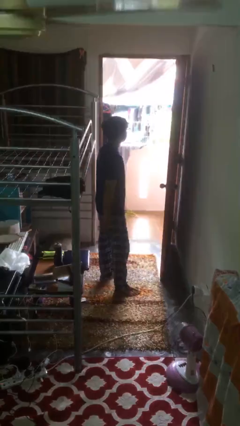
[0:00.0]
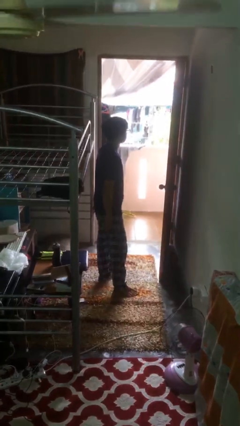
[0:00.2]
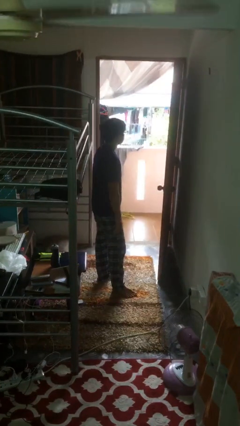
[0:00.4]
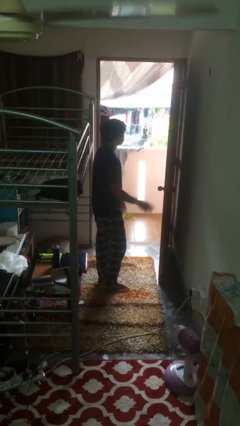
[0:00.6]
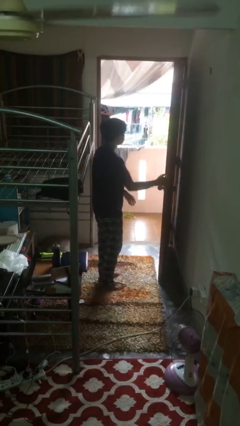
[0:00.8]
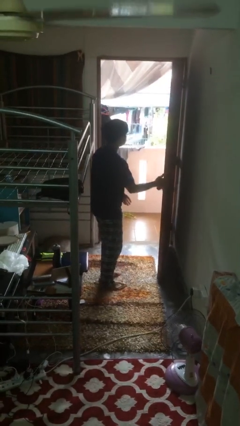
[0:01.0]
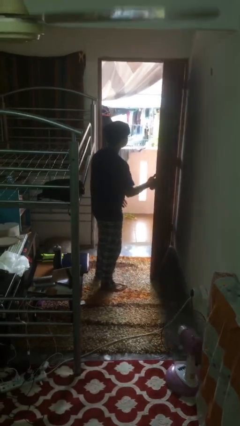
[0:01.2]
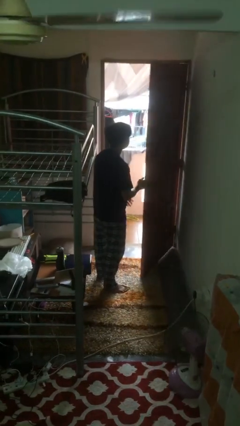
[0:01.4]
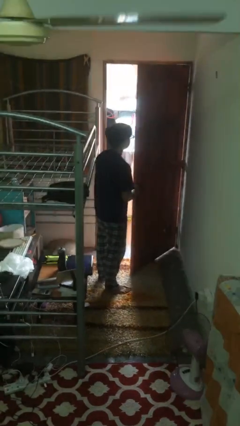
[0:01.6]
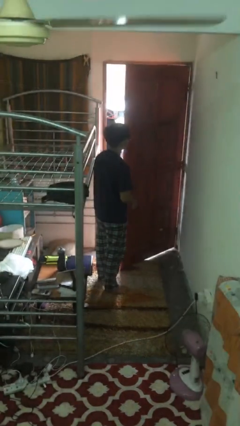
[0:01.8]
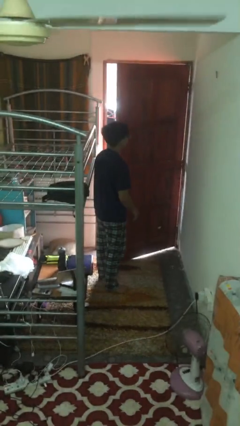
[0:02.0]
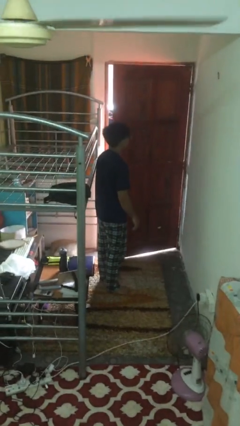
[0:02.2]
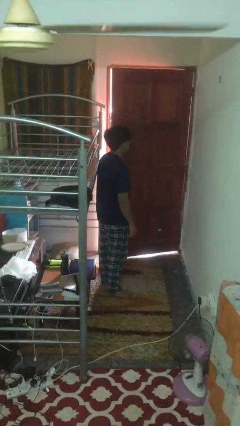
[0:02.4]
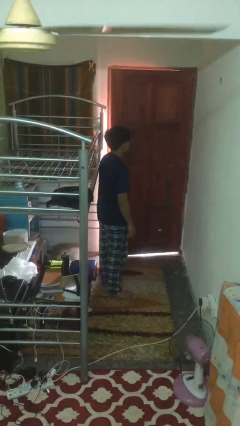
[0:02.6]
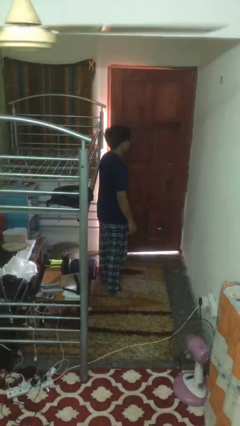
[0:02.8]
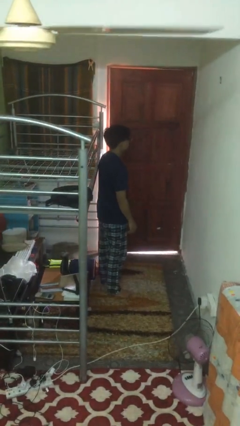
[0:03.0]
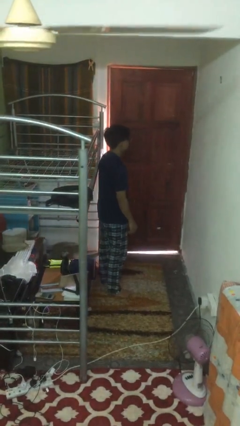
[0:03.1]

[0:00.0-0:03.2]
person closes facility door

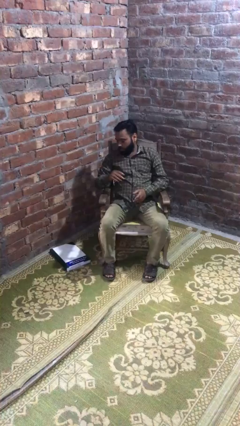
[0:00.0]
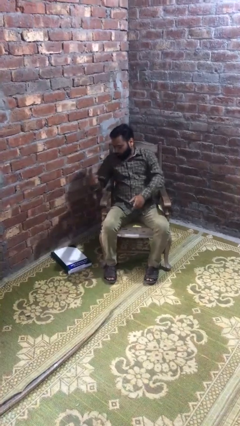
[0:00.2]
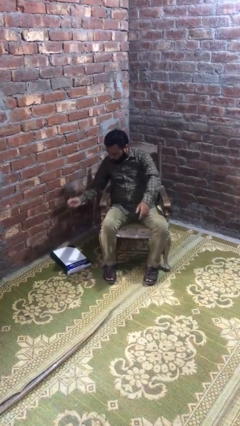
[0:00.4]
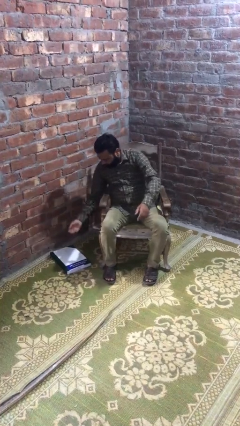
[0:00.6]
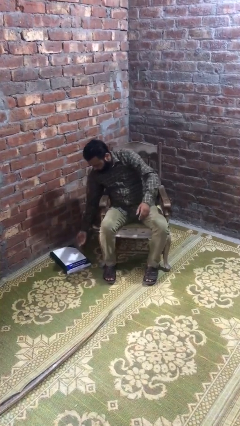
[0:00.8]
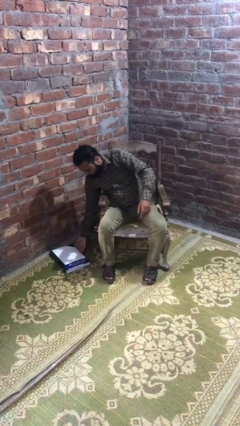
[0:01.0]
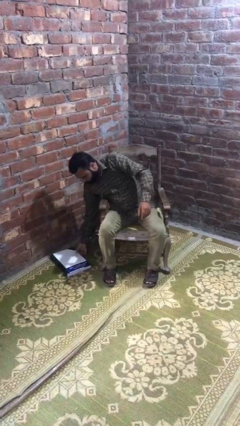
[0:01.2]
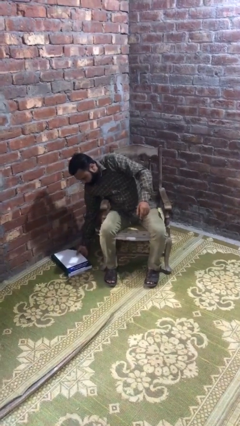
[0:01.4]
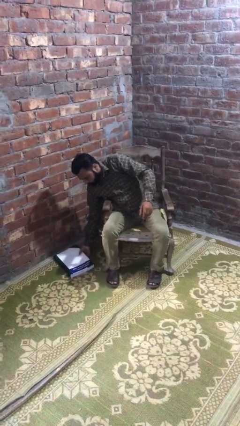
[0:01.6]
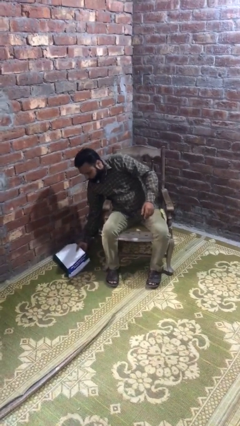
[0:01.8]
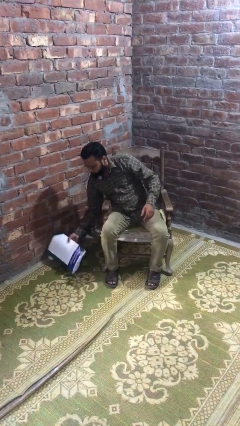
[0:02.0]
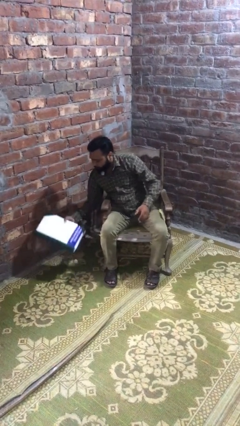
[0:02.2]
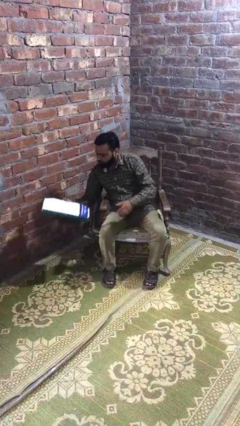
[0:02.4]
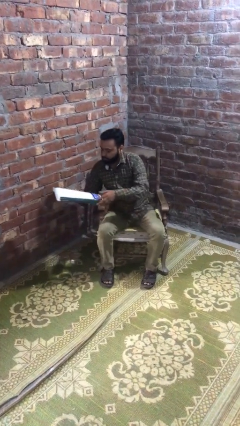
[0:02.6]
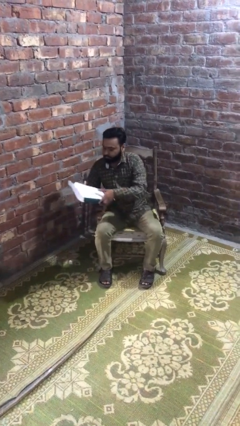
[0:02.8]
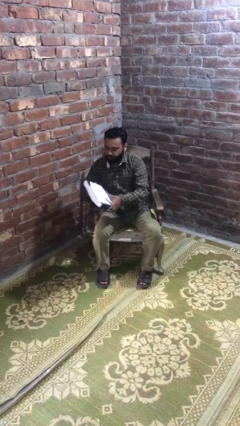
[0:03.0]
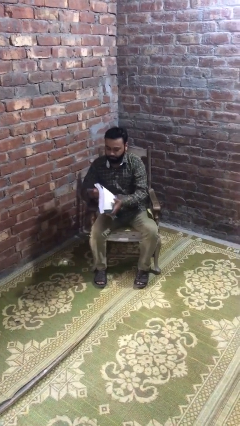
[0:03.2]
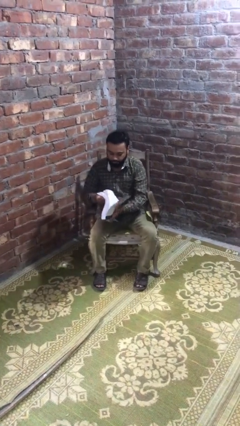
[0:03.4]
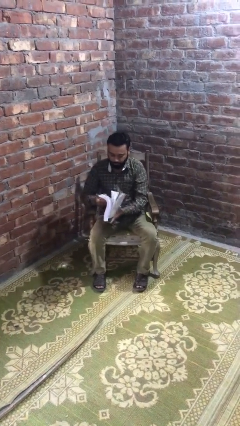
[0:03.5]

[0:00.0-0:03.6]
person picks up object from floor

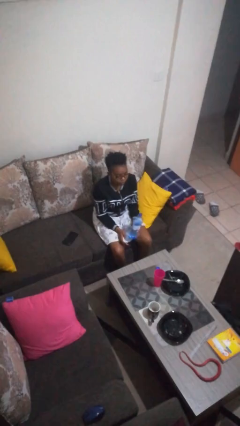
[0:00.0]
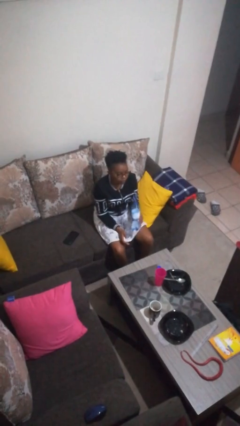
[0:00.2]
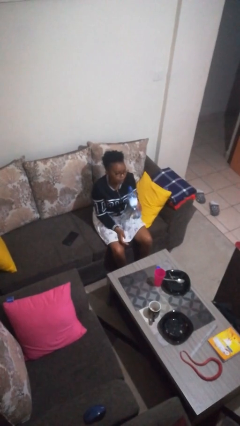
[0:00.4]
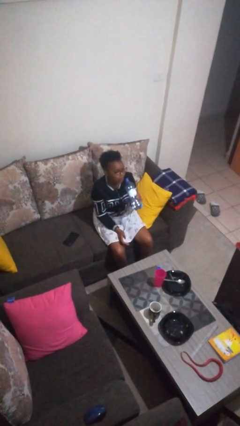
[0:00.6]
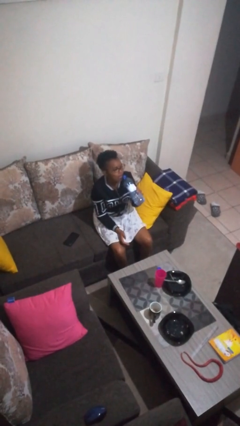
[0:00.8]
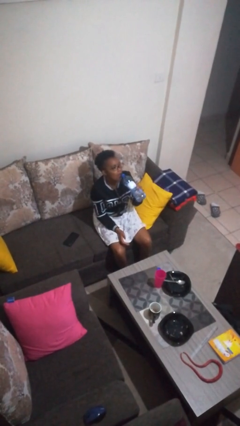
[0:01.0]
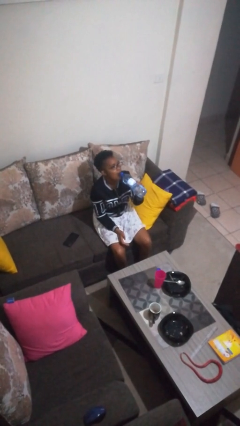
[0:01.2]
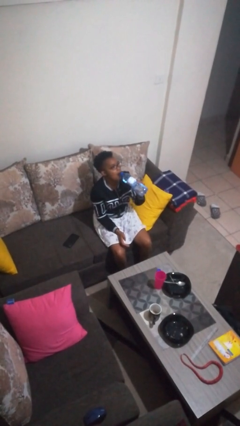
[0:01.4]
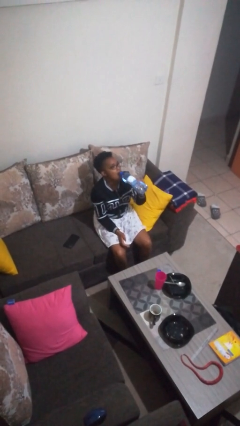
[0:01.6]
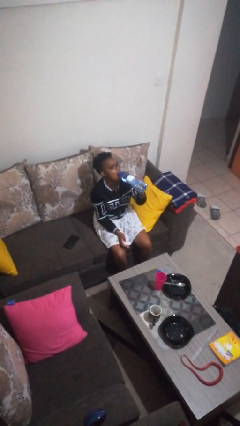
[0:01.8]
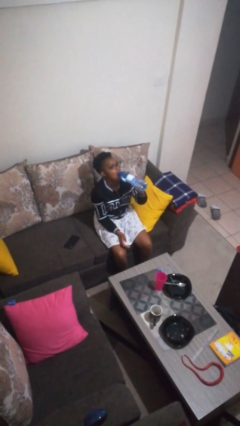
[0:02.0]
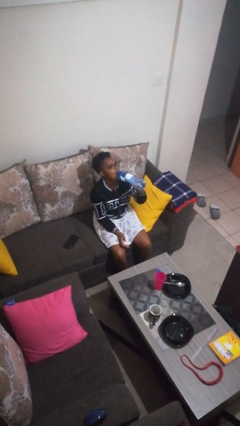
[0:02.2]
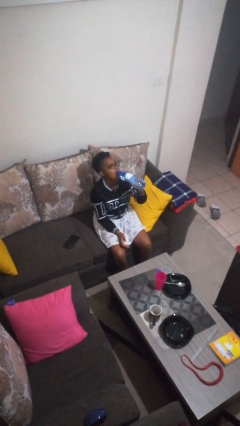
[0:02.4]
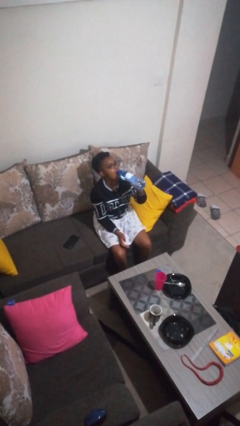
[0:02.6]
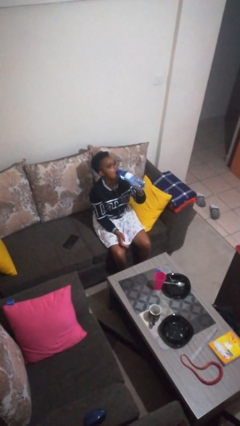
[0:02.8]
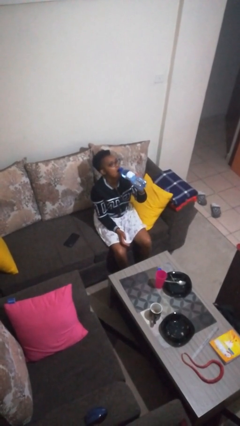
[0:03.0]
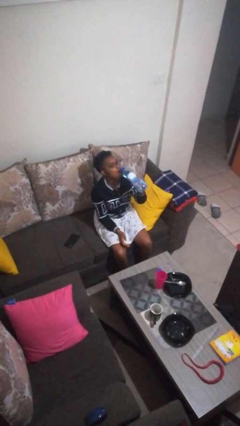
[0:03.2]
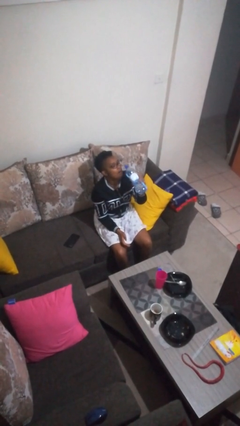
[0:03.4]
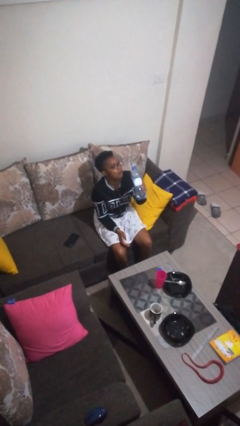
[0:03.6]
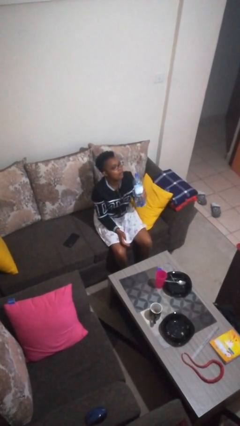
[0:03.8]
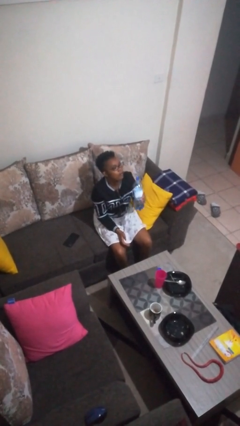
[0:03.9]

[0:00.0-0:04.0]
person drinks from bottle

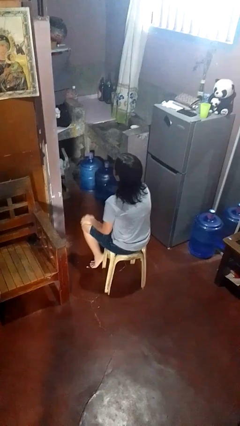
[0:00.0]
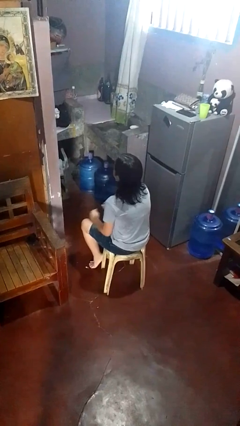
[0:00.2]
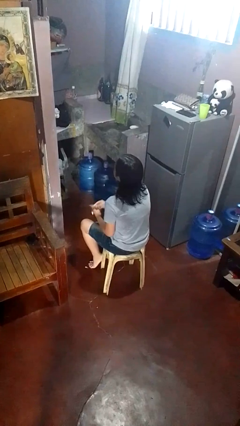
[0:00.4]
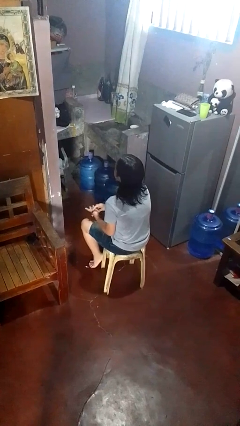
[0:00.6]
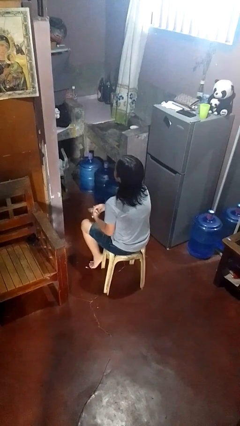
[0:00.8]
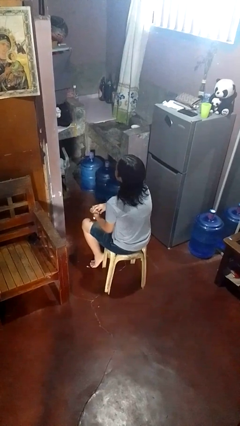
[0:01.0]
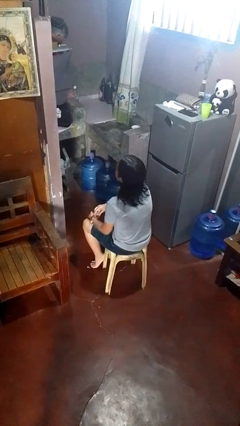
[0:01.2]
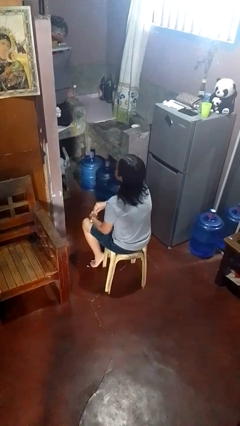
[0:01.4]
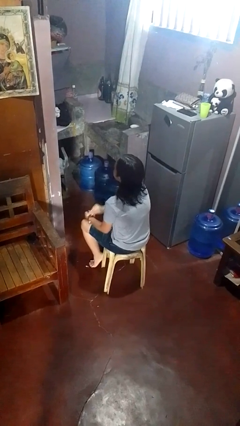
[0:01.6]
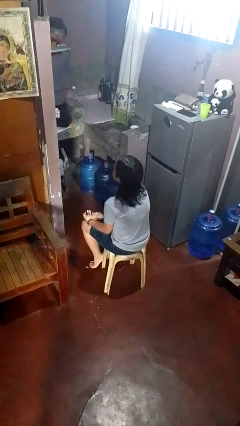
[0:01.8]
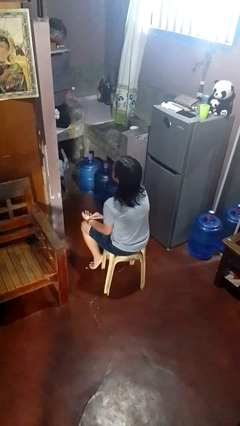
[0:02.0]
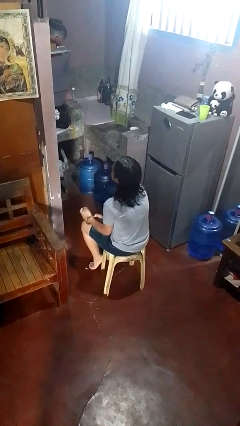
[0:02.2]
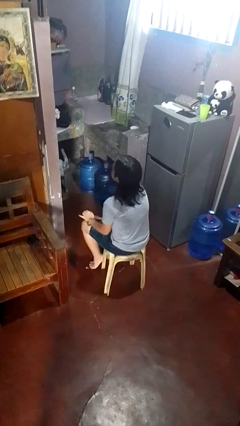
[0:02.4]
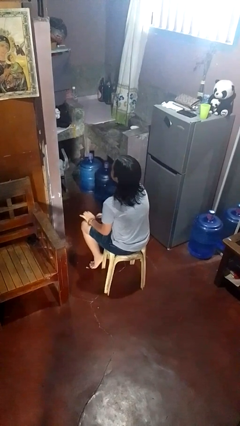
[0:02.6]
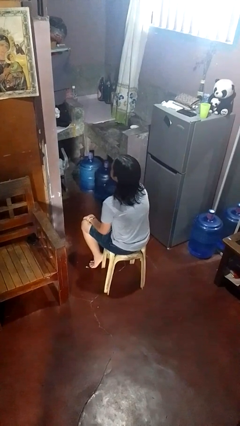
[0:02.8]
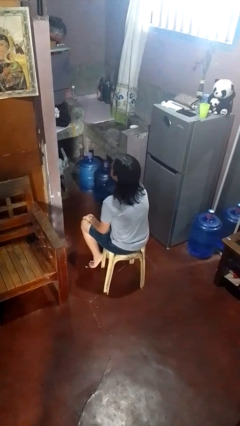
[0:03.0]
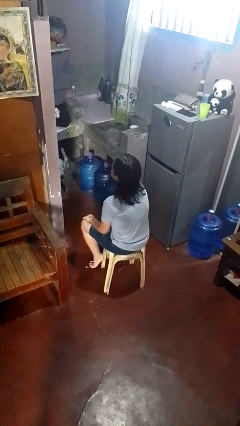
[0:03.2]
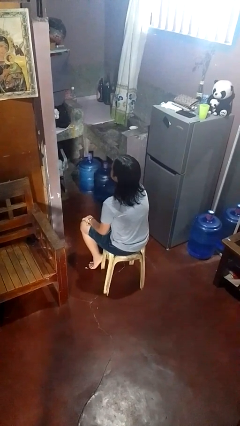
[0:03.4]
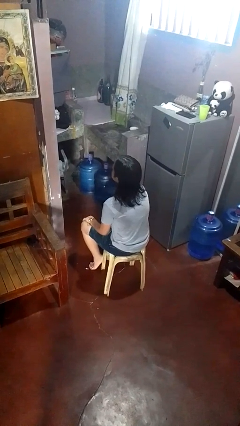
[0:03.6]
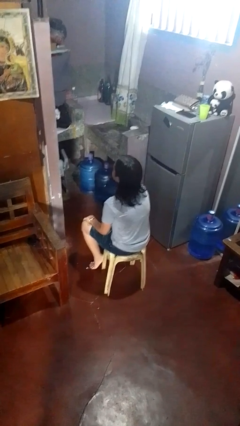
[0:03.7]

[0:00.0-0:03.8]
person puts on wristwatch

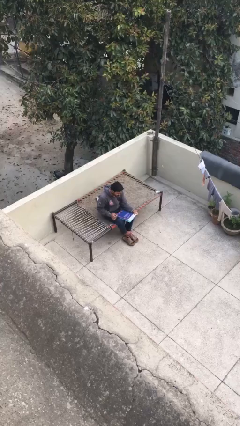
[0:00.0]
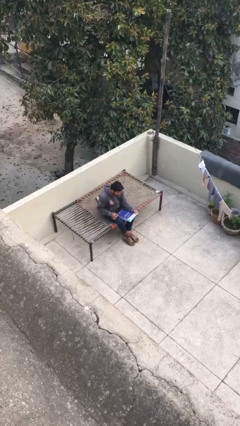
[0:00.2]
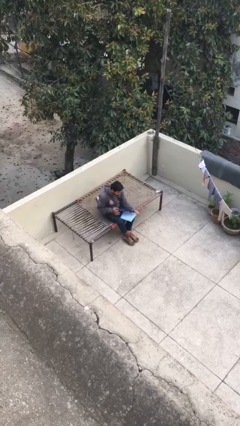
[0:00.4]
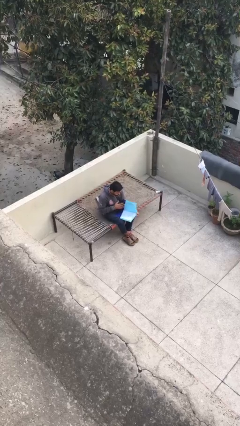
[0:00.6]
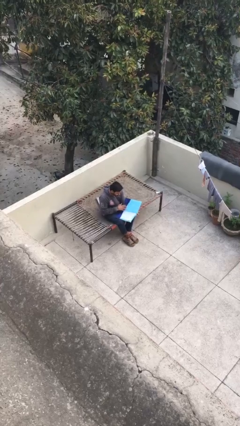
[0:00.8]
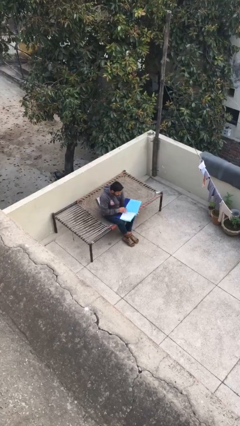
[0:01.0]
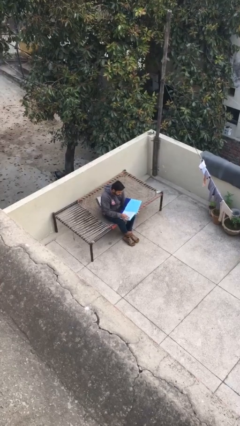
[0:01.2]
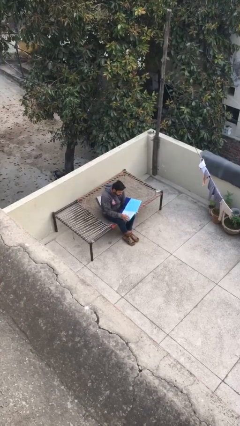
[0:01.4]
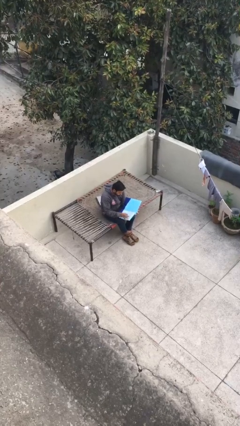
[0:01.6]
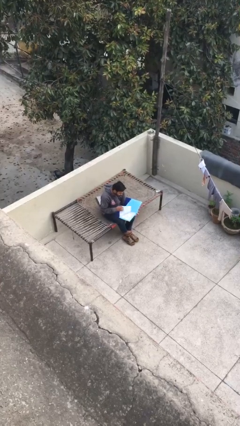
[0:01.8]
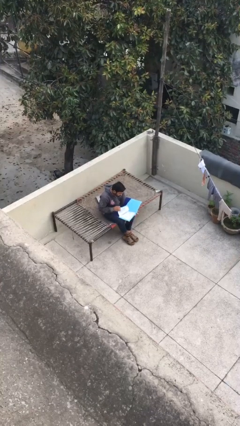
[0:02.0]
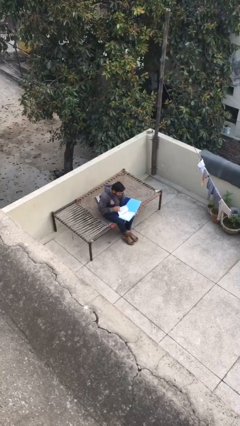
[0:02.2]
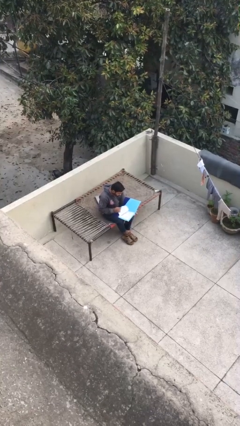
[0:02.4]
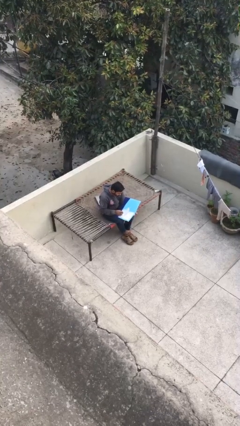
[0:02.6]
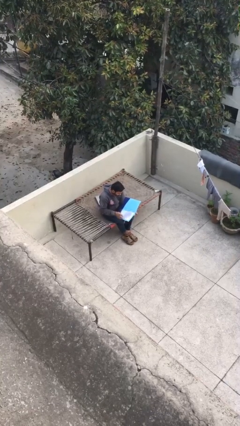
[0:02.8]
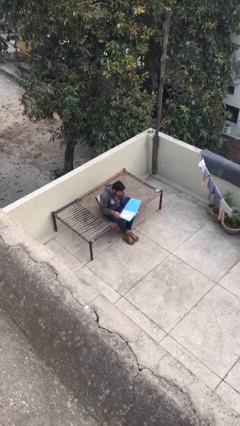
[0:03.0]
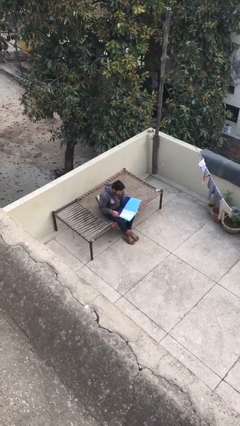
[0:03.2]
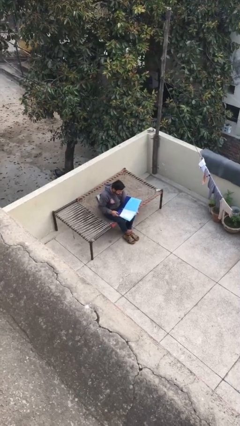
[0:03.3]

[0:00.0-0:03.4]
person reads document
